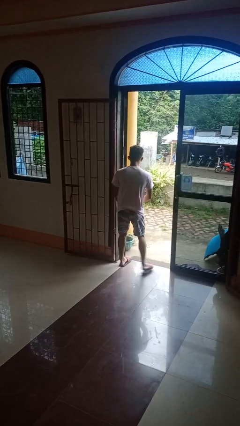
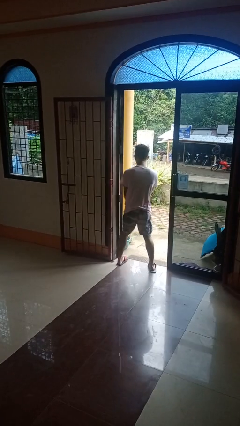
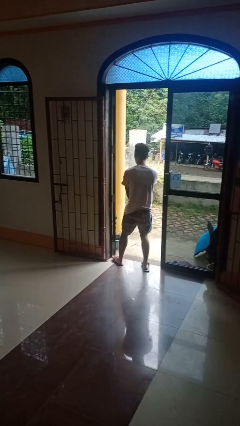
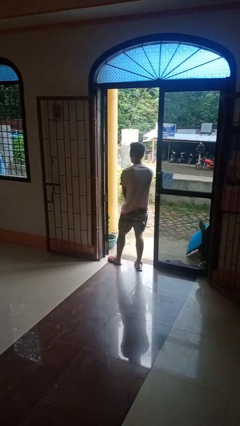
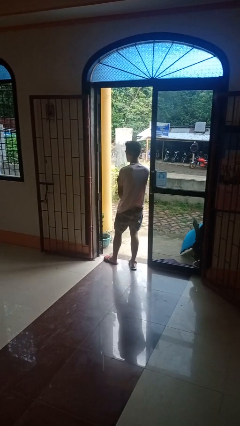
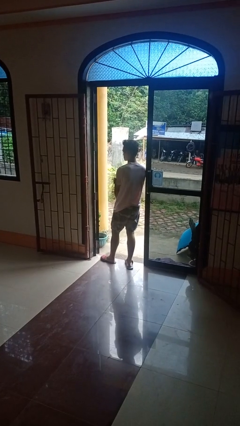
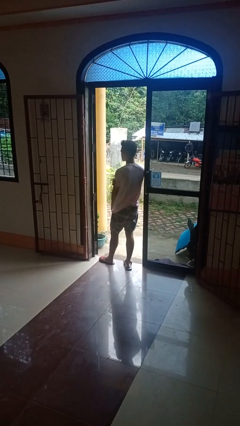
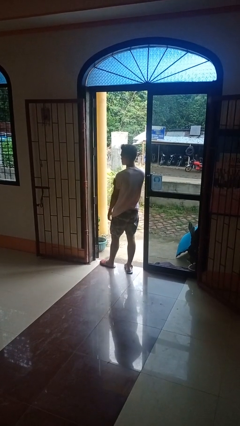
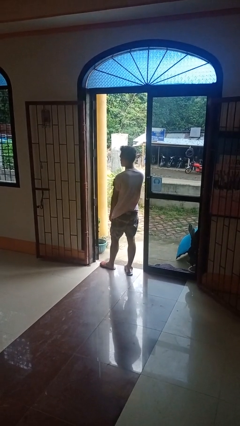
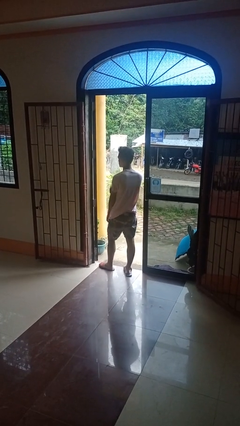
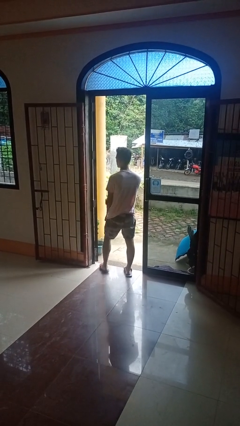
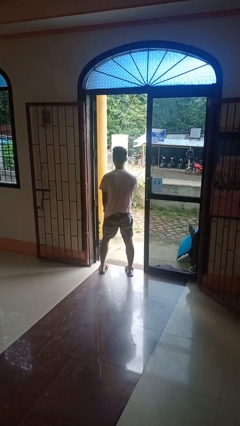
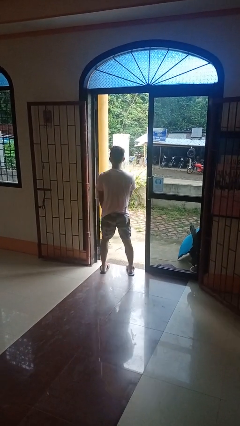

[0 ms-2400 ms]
person bumps into wall

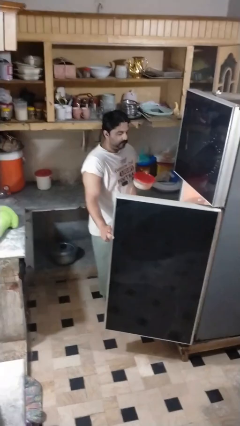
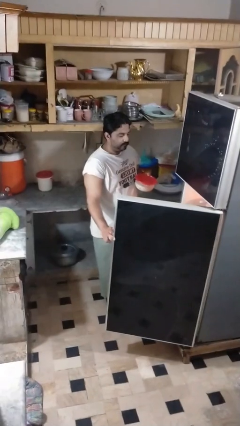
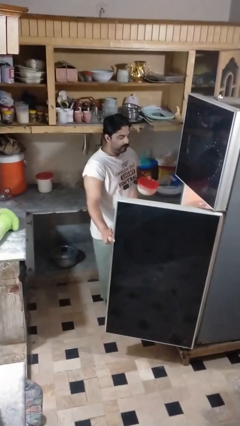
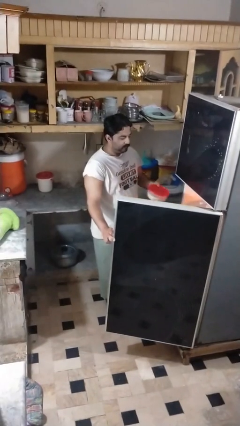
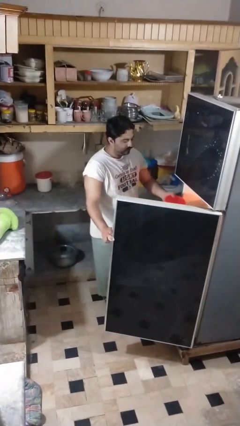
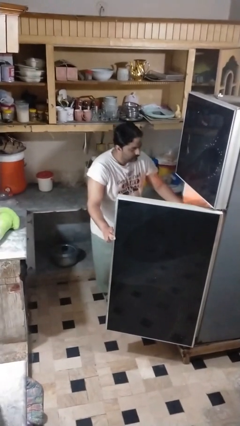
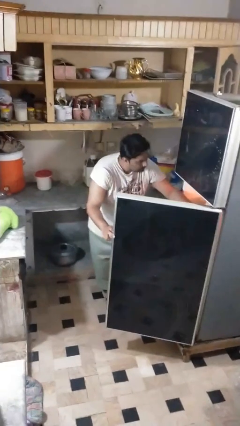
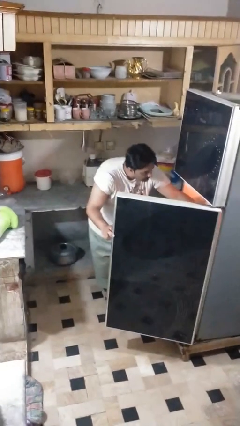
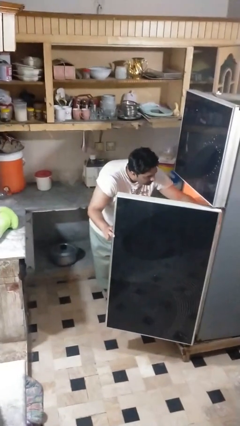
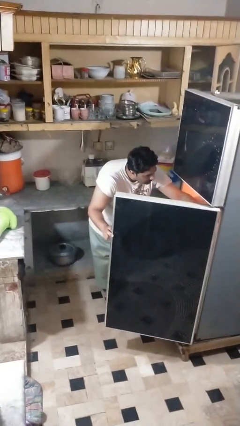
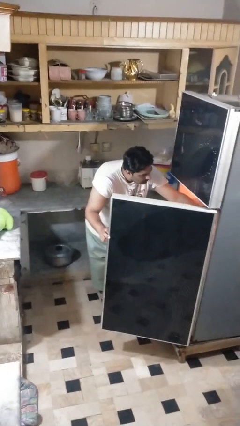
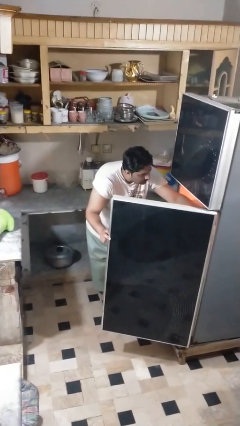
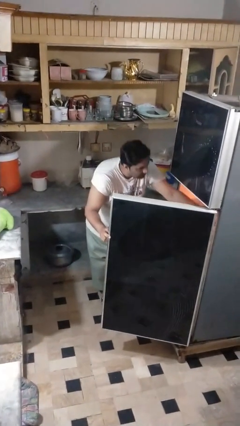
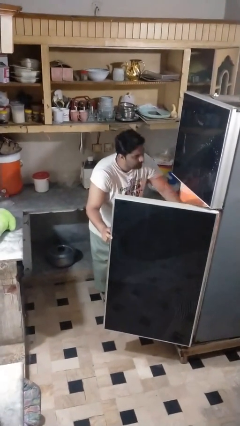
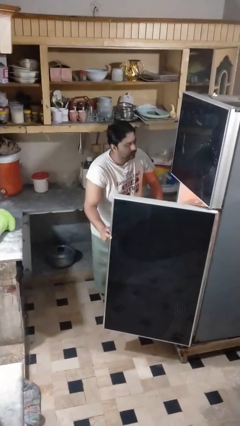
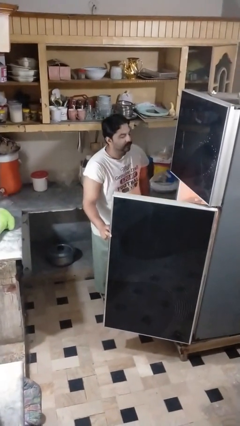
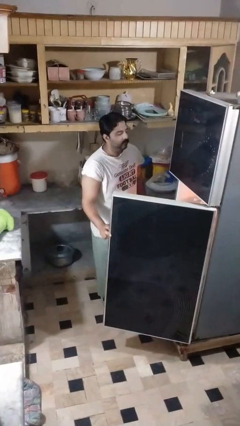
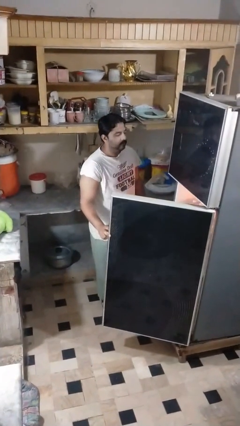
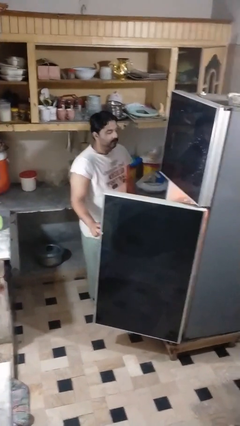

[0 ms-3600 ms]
person puts object into refrigerator

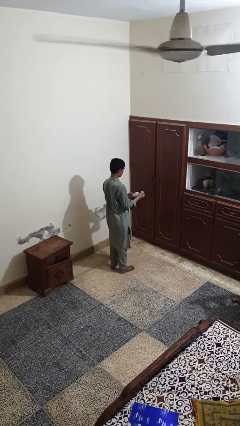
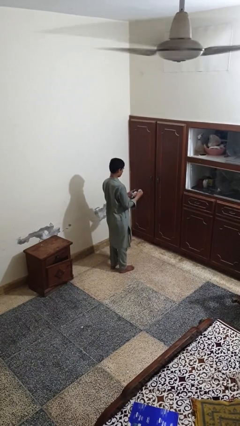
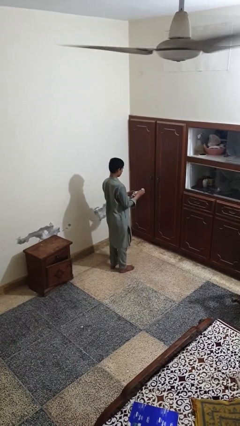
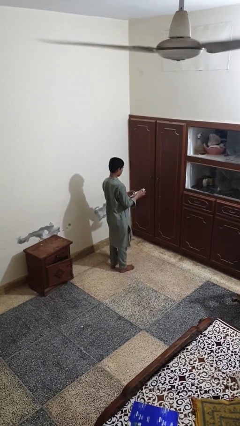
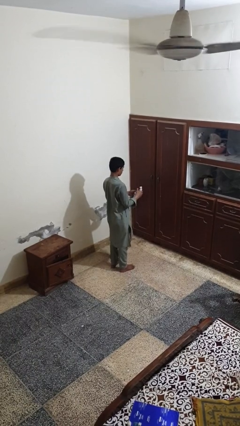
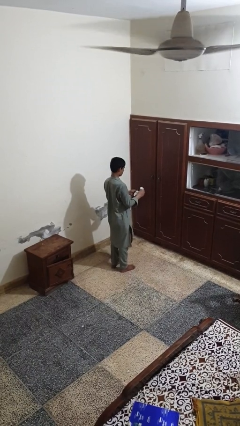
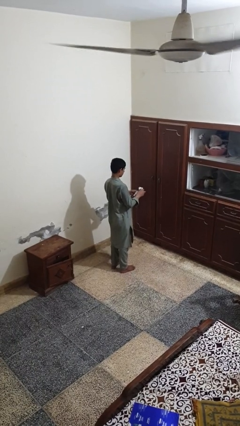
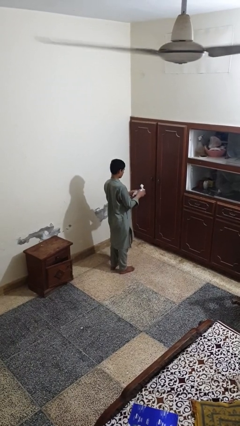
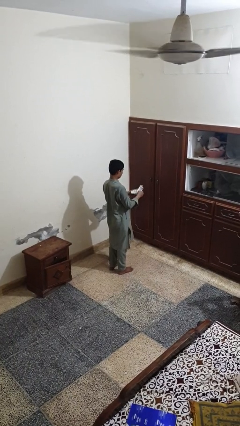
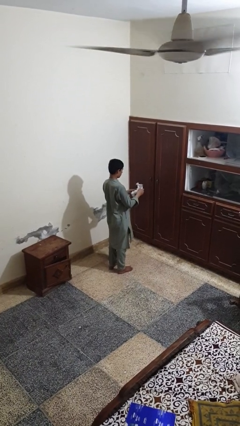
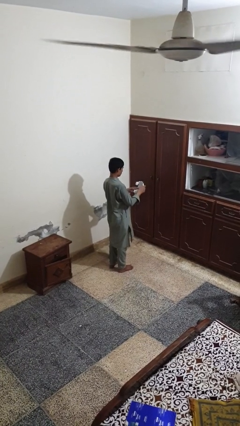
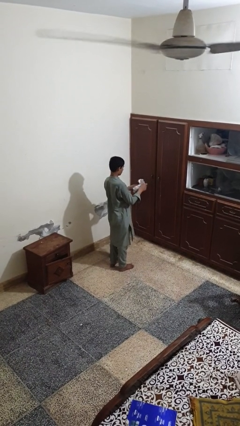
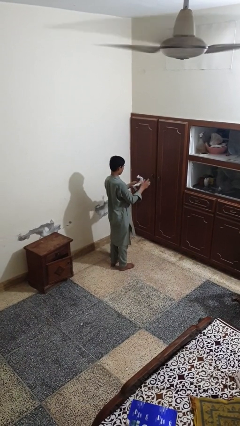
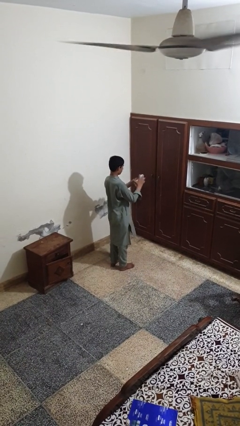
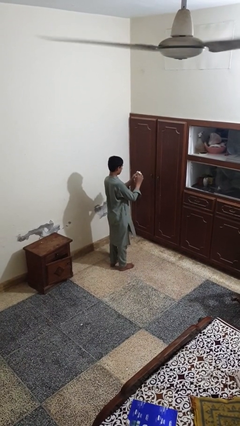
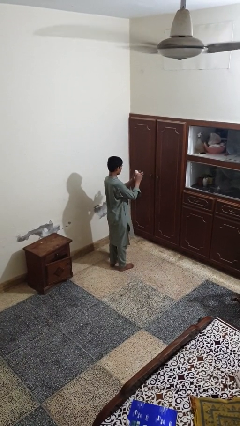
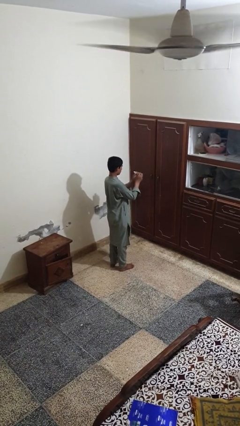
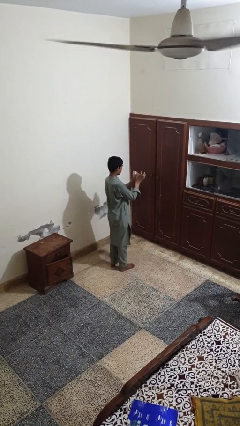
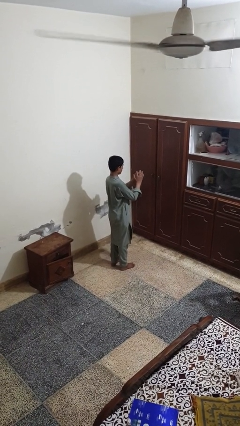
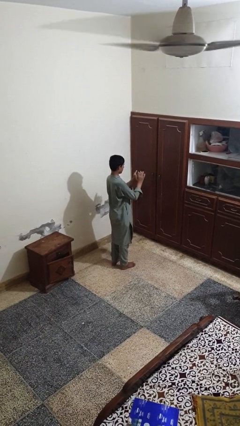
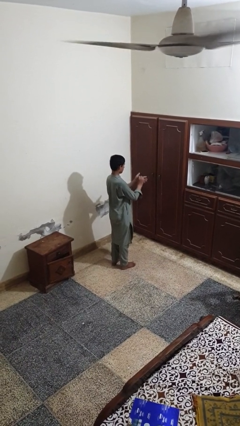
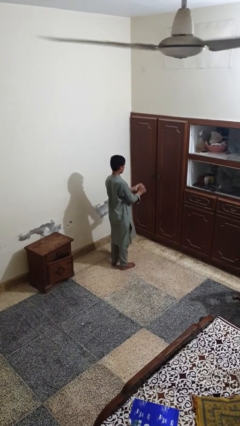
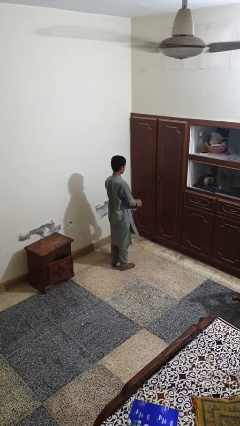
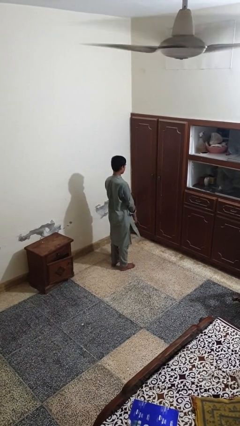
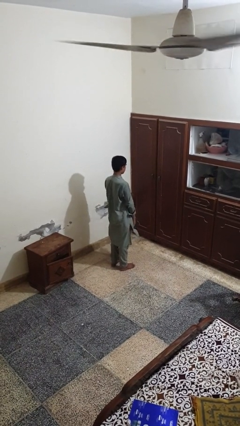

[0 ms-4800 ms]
person crumples paper

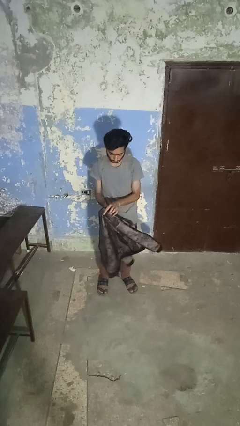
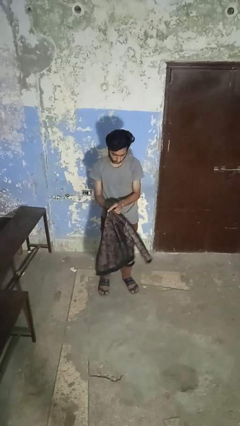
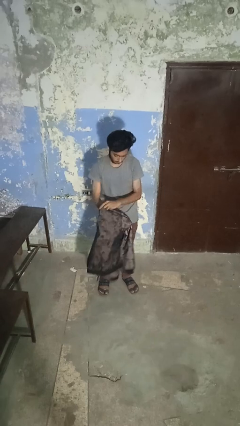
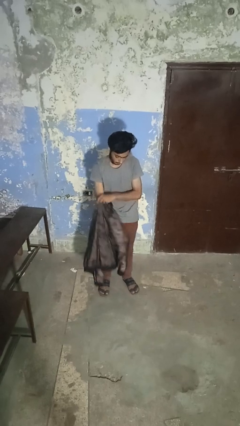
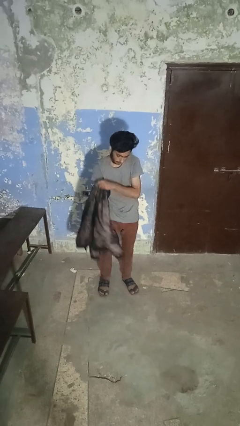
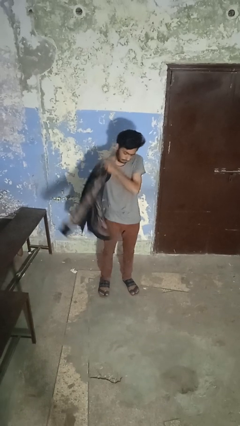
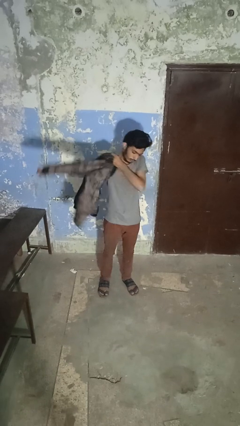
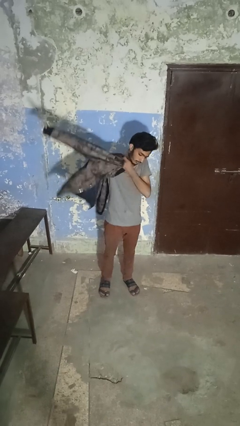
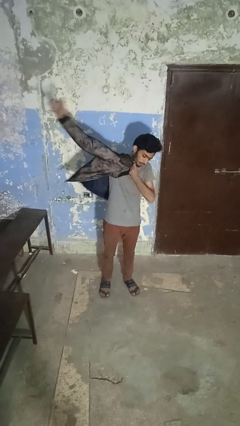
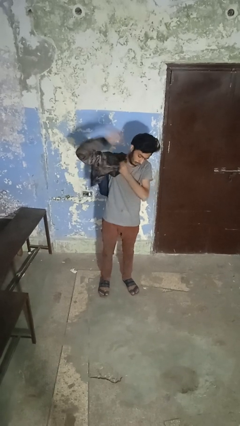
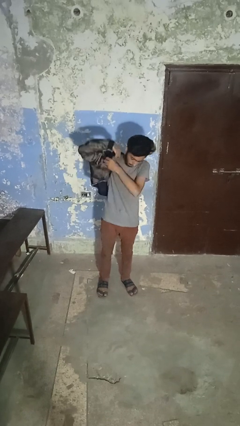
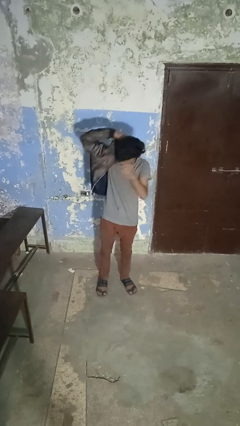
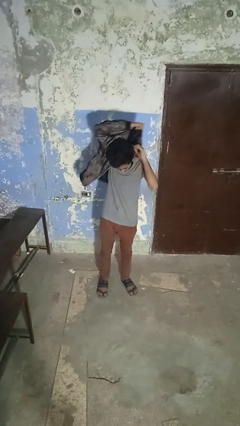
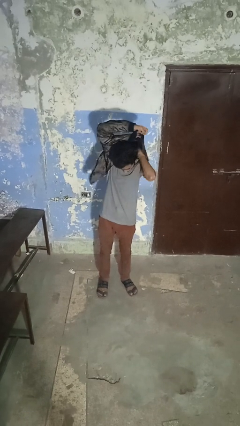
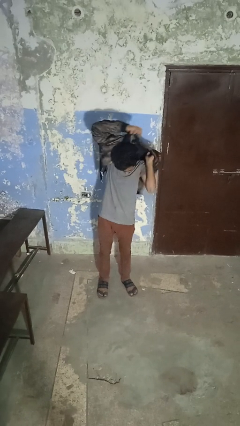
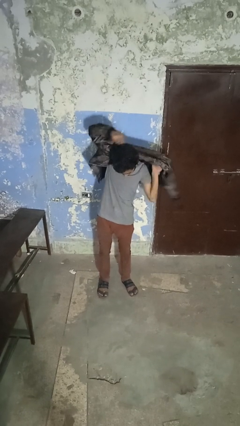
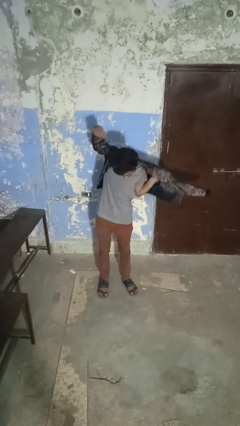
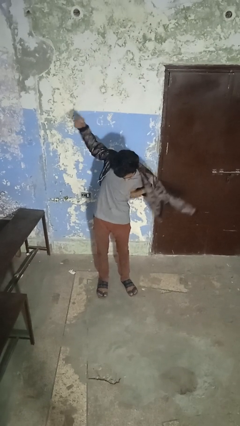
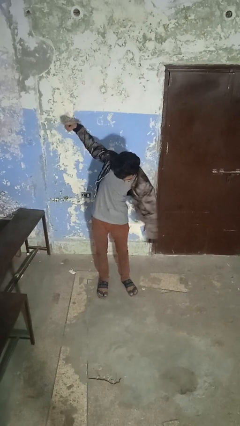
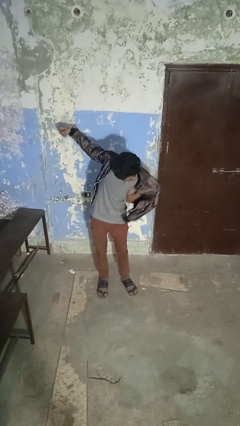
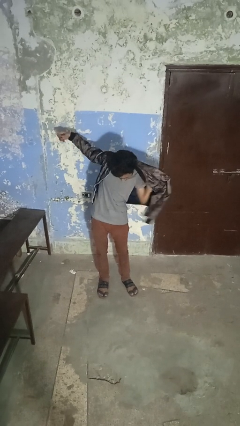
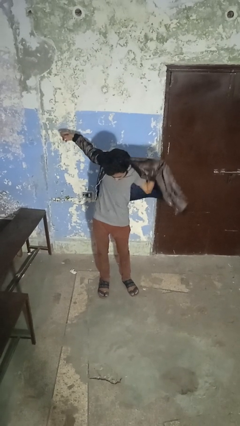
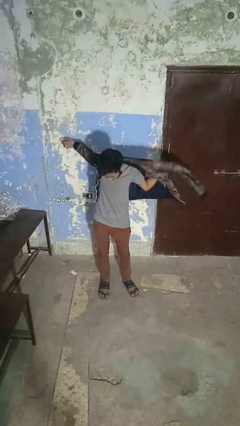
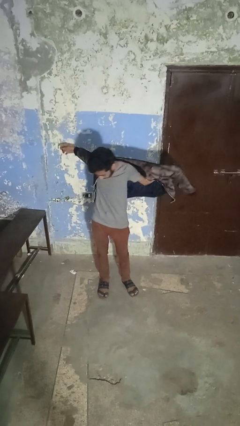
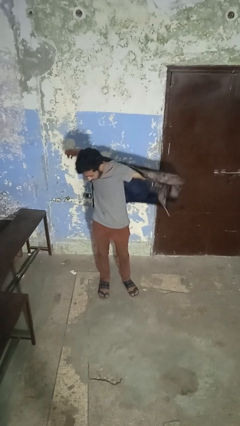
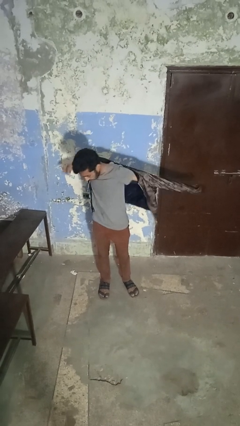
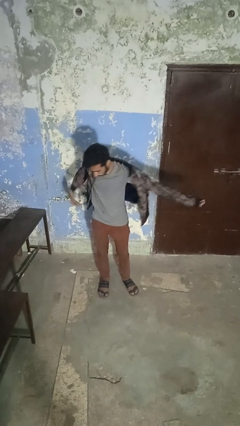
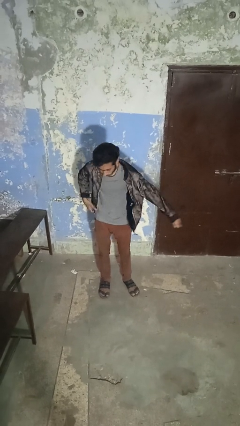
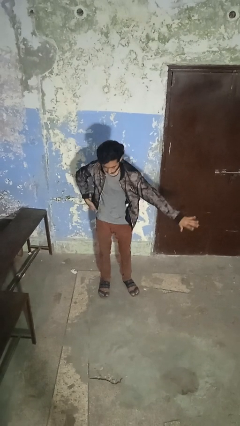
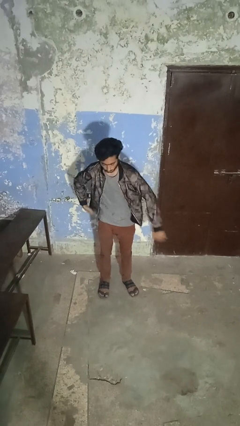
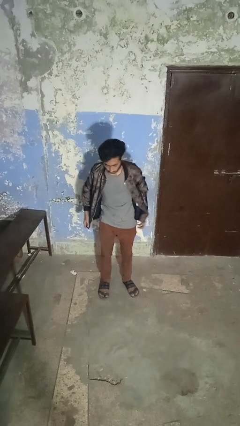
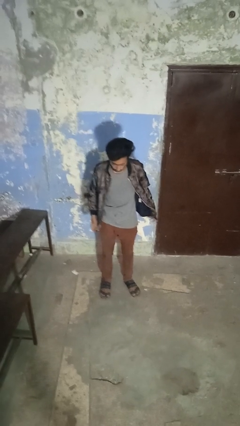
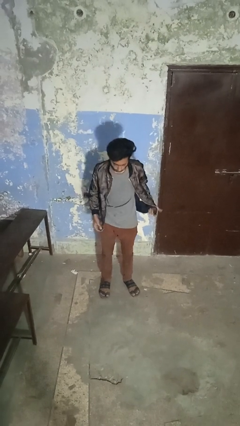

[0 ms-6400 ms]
person puts on jacket

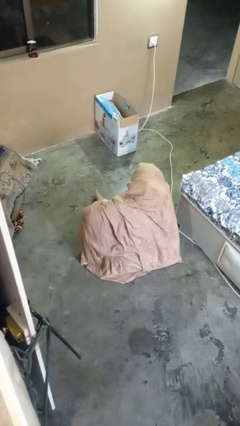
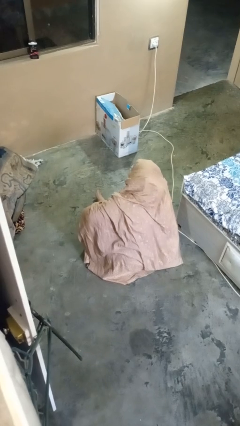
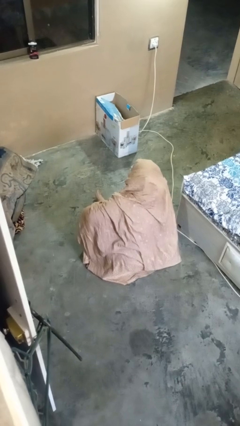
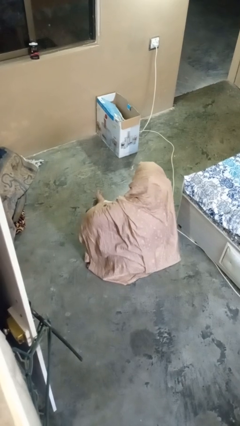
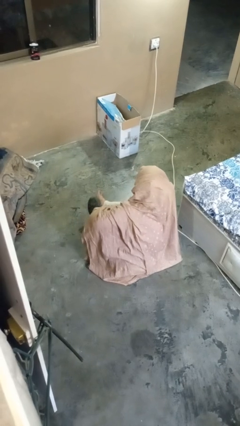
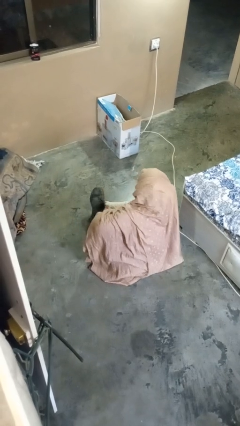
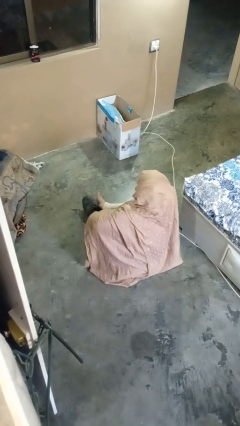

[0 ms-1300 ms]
person takes off shoes
